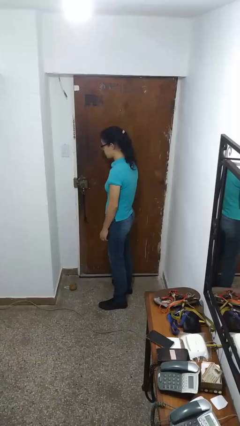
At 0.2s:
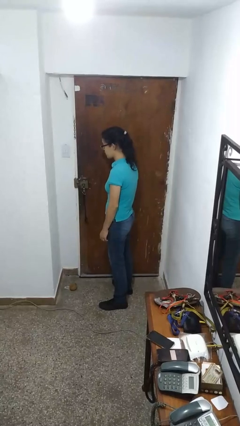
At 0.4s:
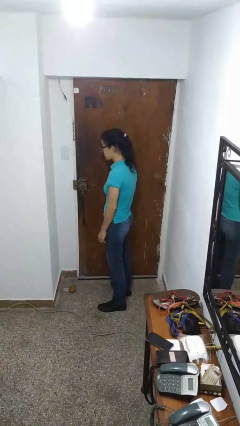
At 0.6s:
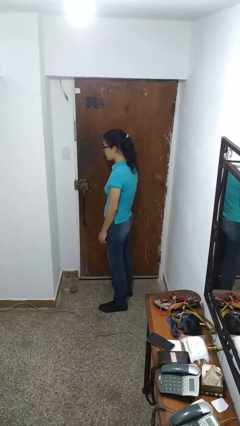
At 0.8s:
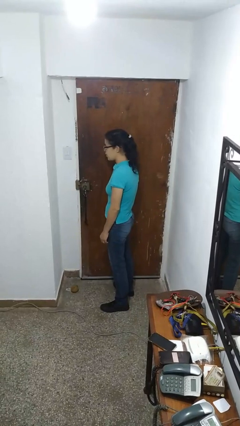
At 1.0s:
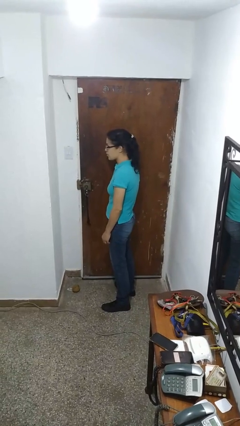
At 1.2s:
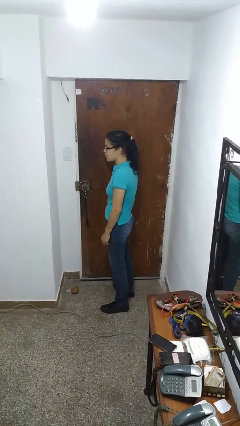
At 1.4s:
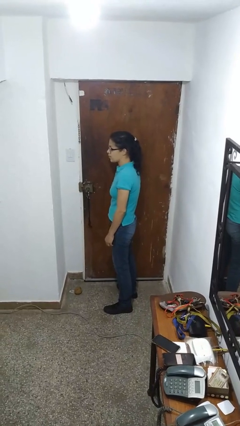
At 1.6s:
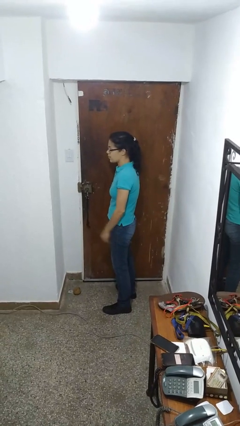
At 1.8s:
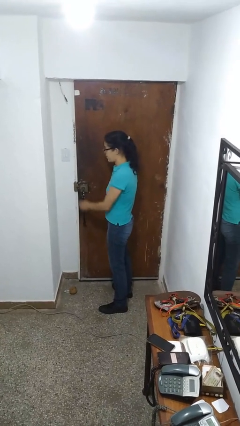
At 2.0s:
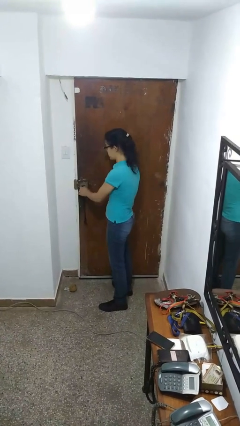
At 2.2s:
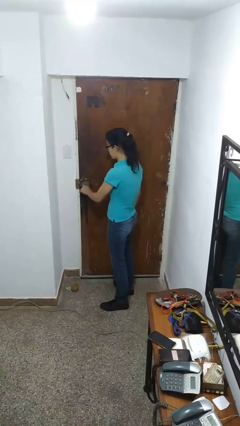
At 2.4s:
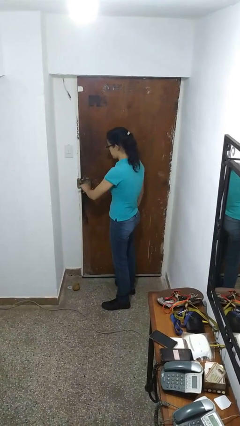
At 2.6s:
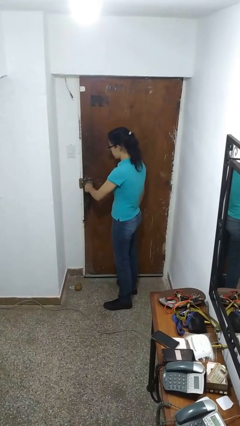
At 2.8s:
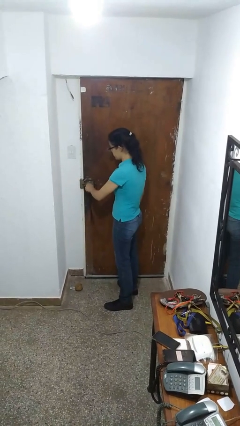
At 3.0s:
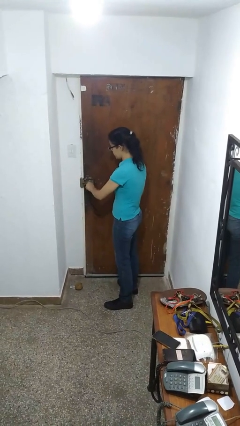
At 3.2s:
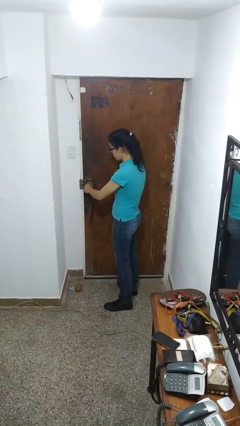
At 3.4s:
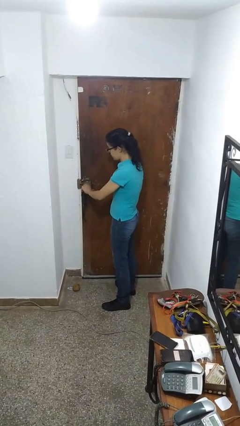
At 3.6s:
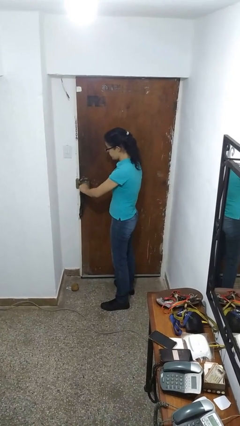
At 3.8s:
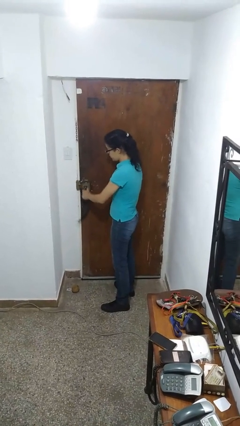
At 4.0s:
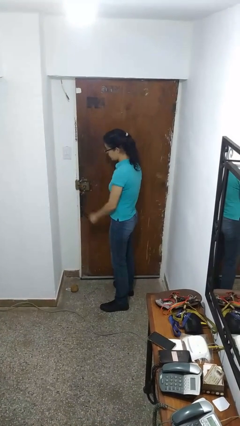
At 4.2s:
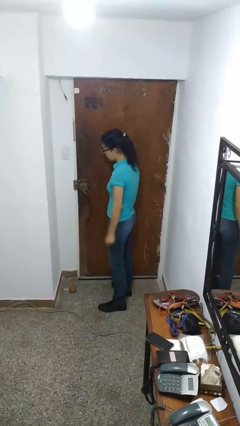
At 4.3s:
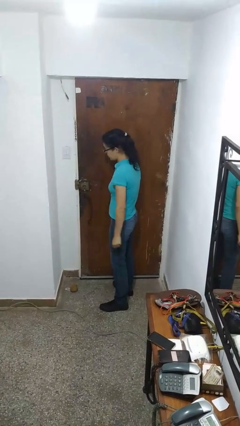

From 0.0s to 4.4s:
person unlocks door with keys

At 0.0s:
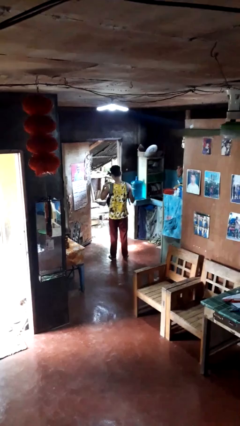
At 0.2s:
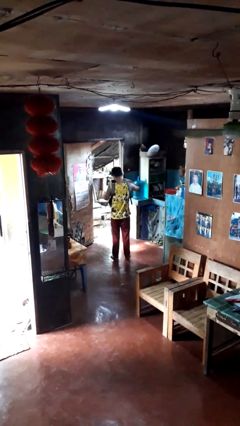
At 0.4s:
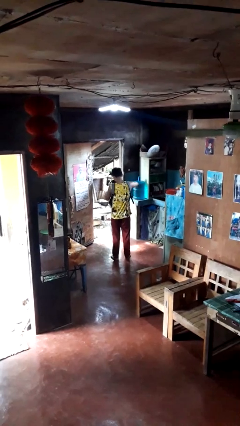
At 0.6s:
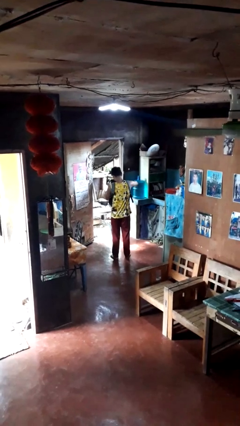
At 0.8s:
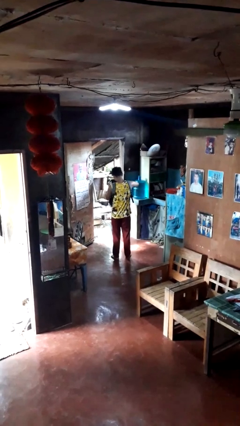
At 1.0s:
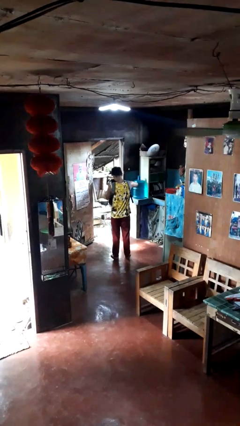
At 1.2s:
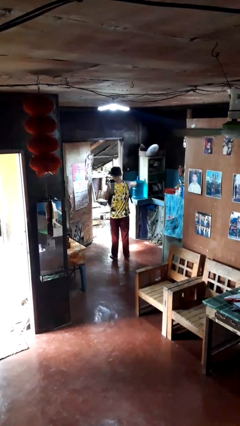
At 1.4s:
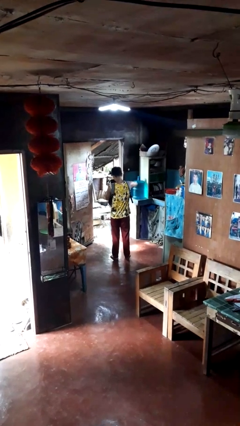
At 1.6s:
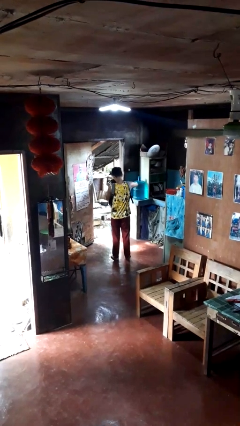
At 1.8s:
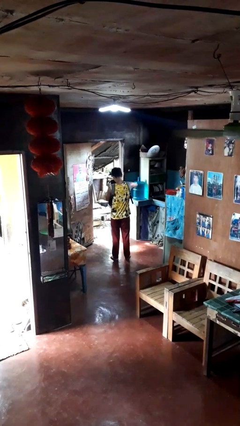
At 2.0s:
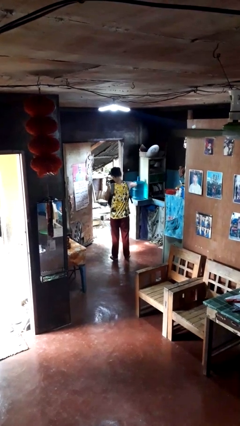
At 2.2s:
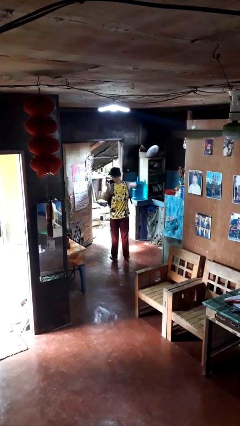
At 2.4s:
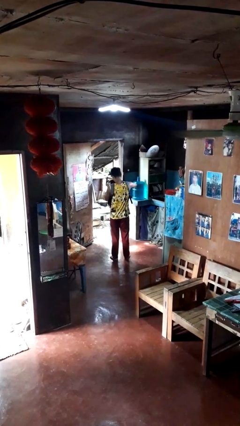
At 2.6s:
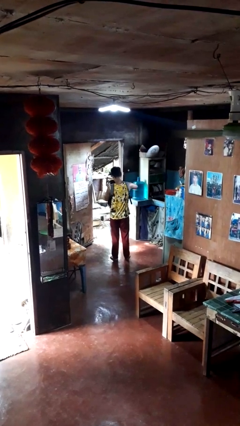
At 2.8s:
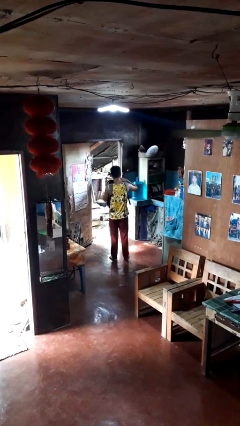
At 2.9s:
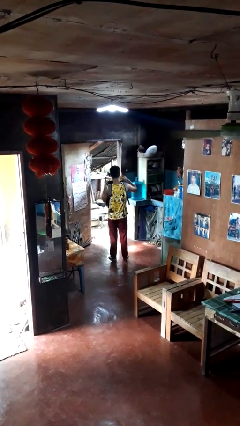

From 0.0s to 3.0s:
person searches in backpack

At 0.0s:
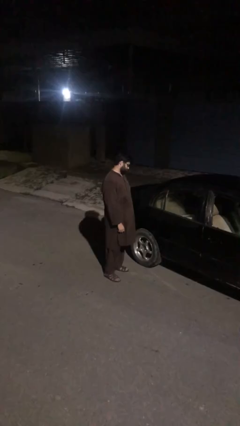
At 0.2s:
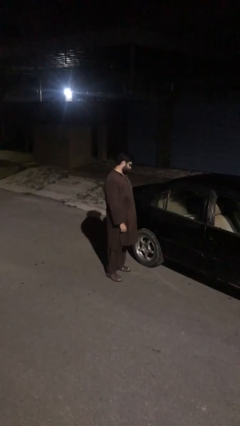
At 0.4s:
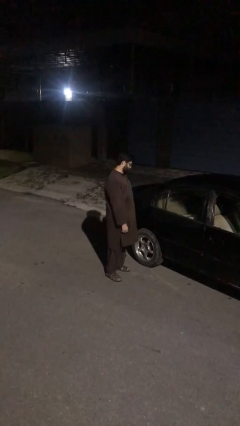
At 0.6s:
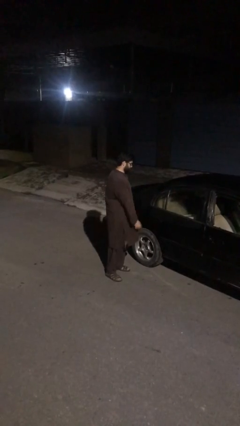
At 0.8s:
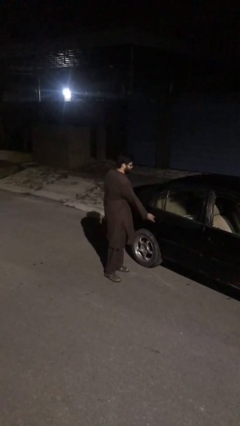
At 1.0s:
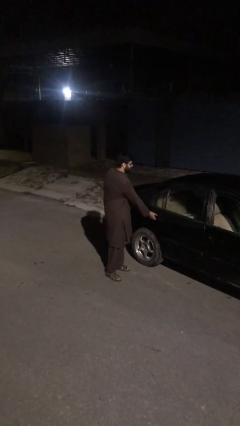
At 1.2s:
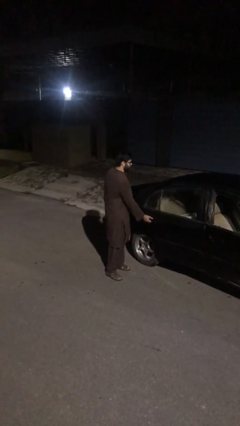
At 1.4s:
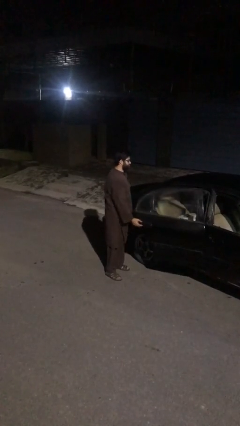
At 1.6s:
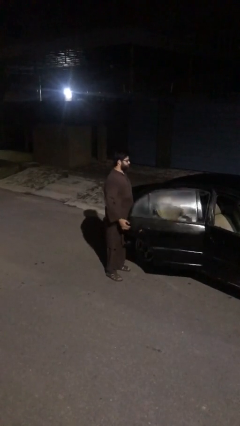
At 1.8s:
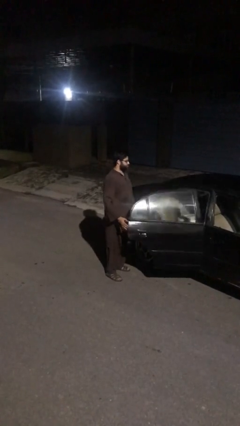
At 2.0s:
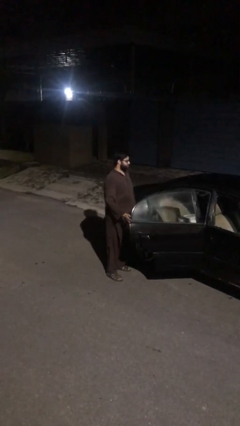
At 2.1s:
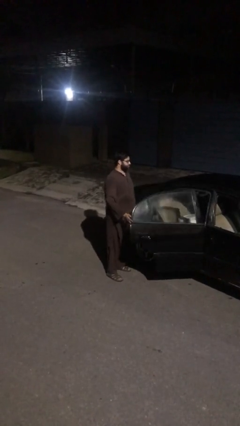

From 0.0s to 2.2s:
person opens car door

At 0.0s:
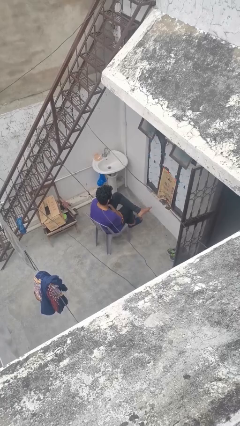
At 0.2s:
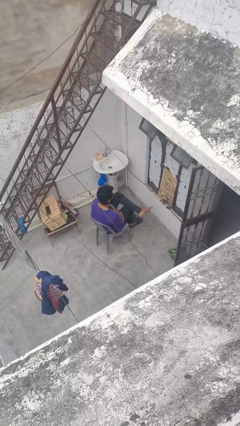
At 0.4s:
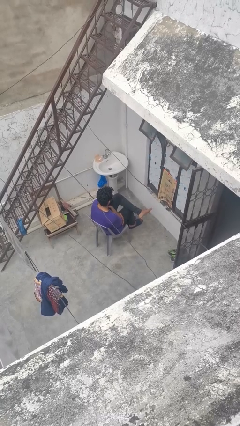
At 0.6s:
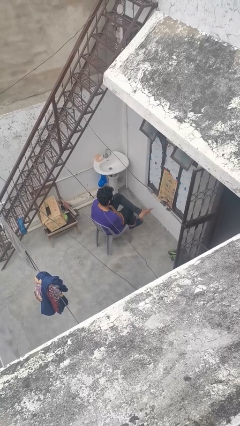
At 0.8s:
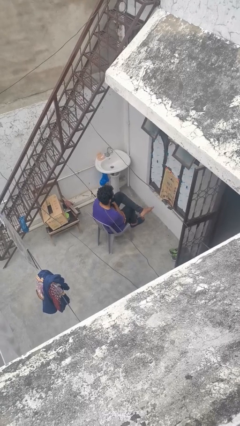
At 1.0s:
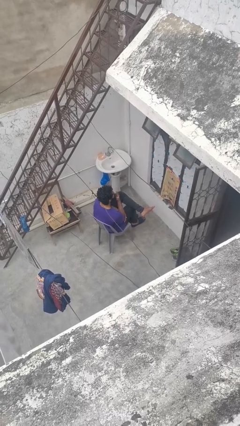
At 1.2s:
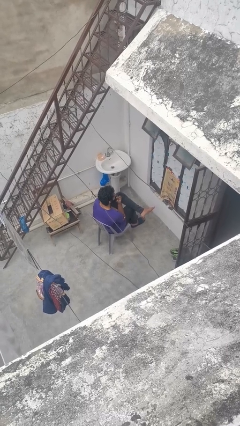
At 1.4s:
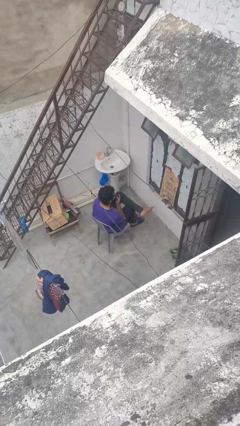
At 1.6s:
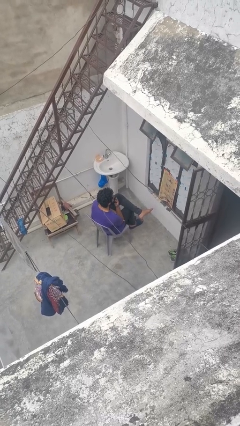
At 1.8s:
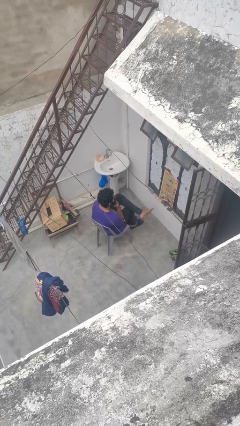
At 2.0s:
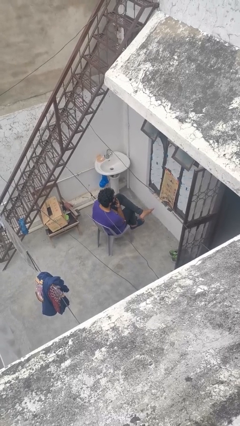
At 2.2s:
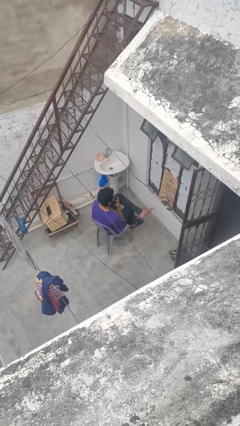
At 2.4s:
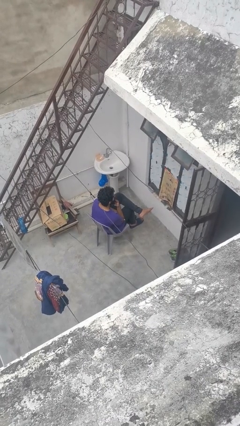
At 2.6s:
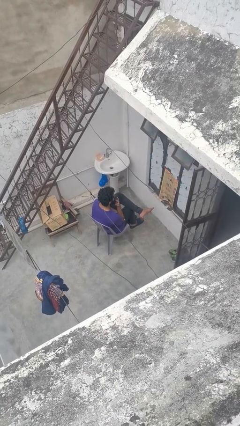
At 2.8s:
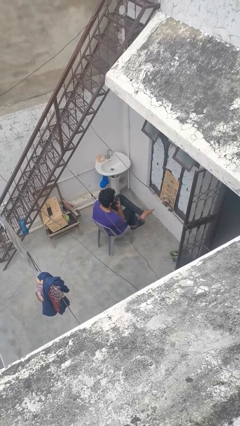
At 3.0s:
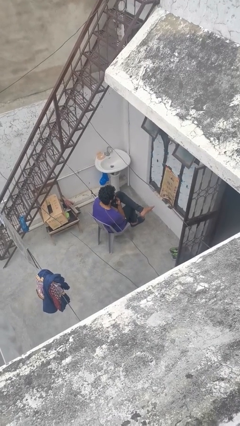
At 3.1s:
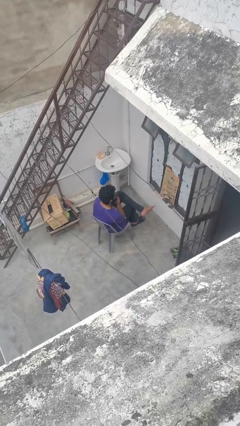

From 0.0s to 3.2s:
person strokes chin

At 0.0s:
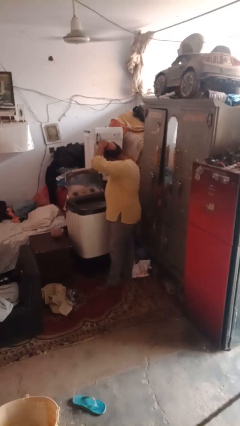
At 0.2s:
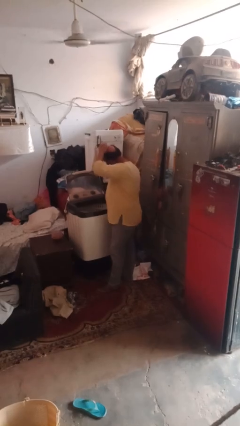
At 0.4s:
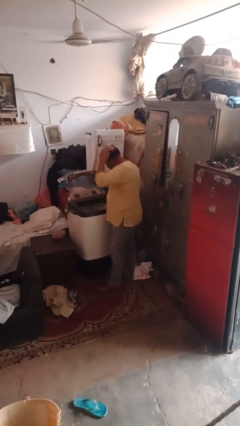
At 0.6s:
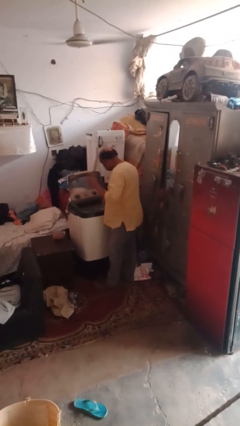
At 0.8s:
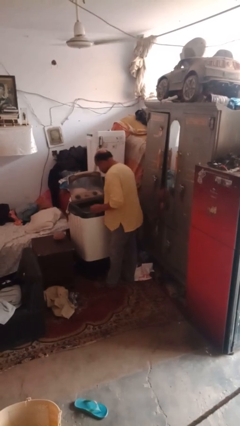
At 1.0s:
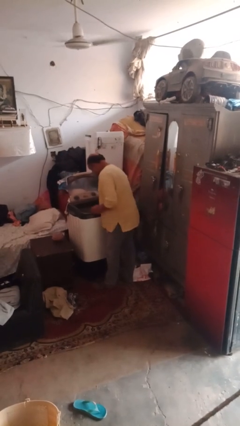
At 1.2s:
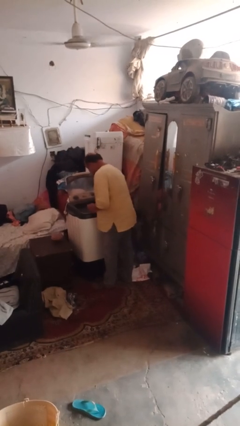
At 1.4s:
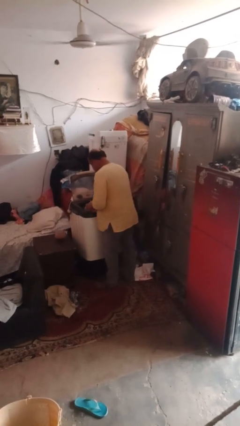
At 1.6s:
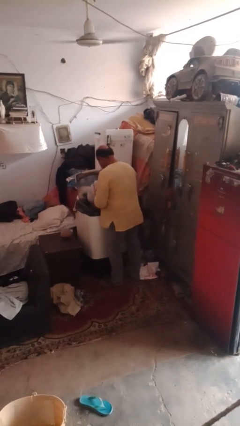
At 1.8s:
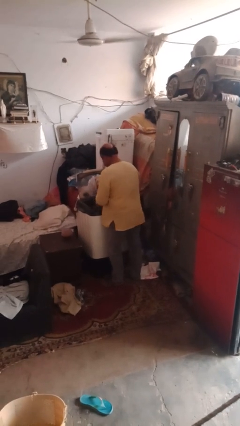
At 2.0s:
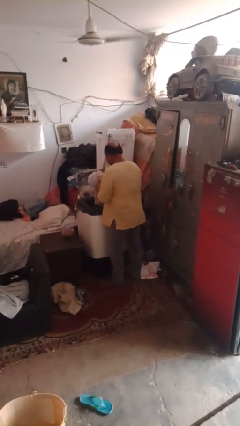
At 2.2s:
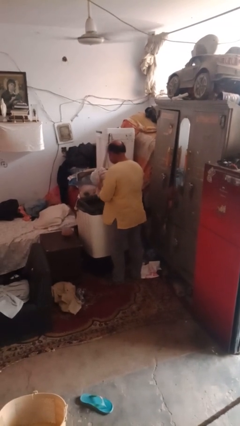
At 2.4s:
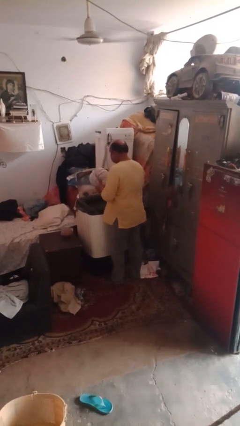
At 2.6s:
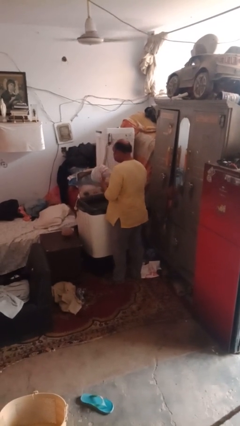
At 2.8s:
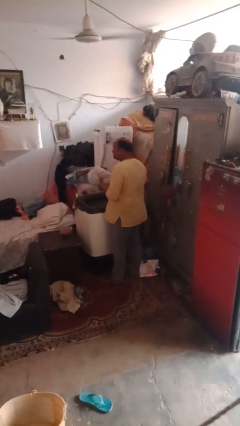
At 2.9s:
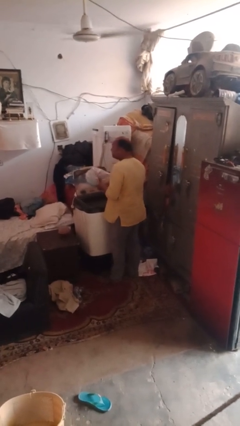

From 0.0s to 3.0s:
person unloads clotheswasher

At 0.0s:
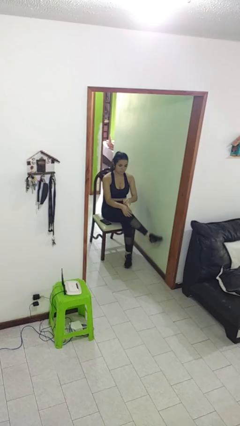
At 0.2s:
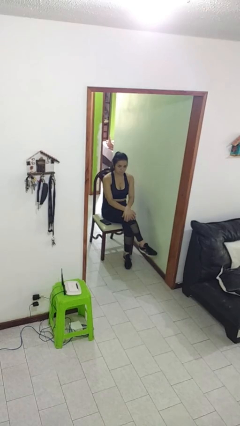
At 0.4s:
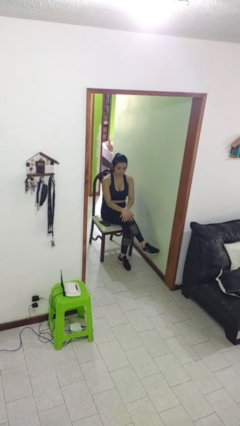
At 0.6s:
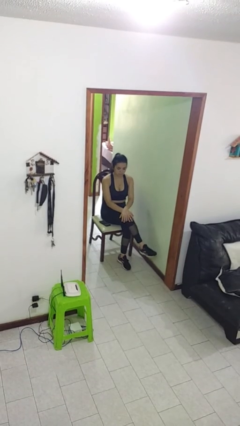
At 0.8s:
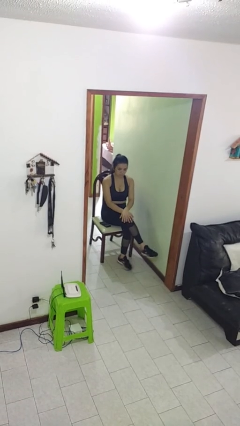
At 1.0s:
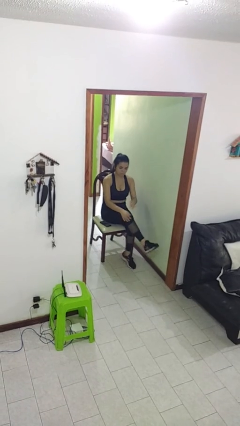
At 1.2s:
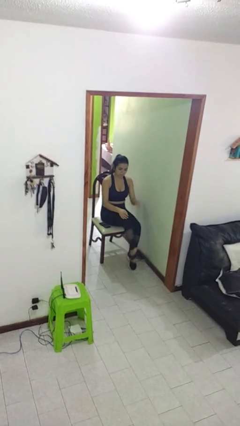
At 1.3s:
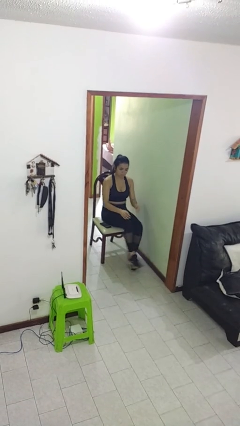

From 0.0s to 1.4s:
person crosses legs

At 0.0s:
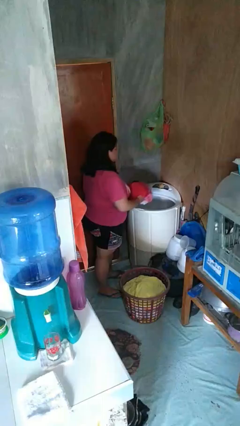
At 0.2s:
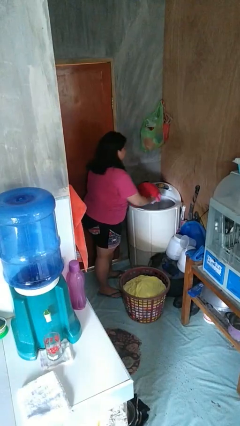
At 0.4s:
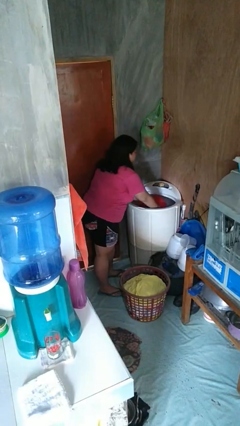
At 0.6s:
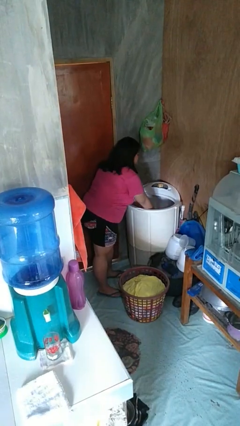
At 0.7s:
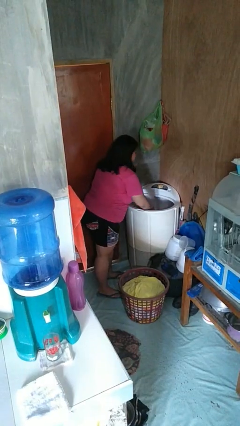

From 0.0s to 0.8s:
person loads clotheswasher
